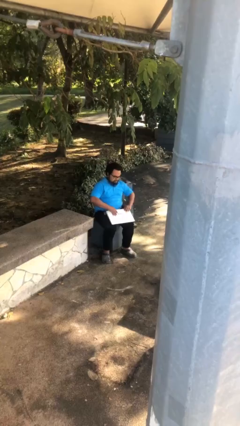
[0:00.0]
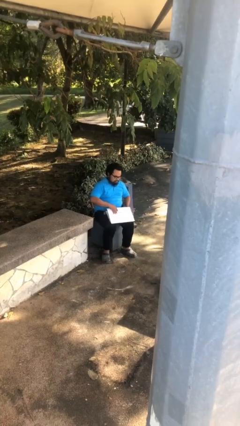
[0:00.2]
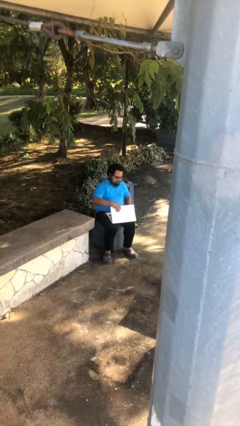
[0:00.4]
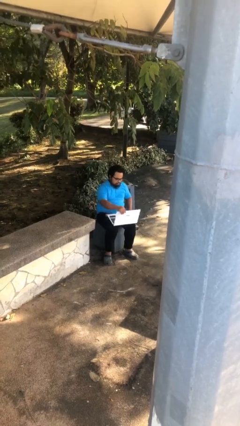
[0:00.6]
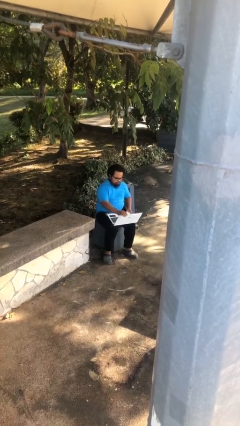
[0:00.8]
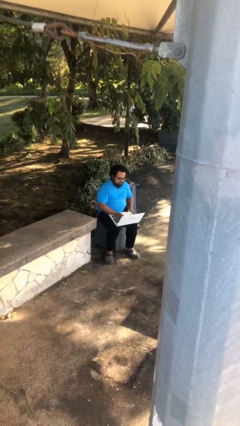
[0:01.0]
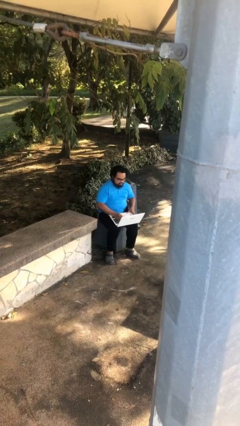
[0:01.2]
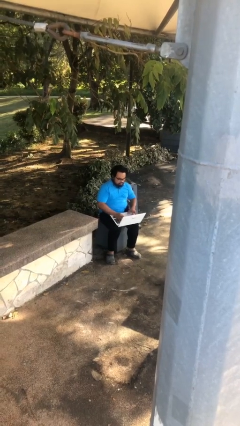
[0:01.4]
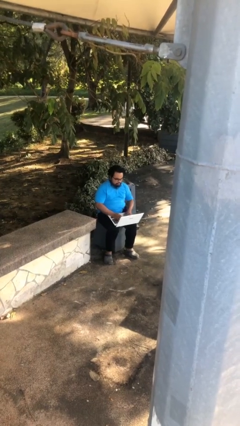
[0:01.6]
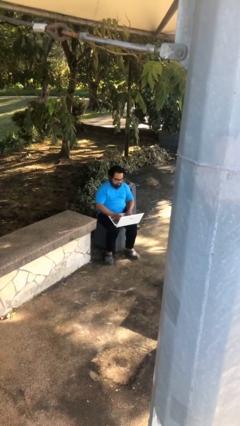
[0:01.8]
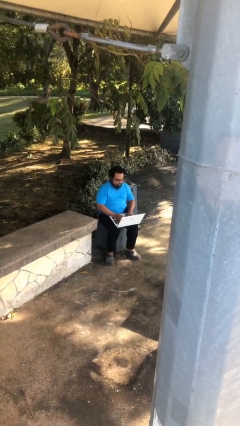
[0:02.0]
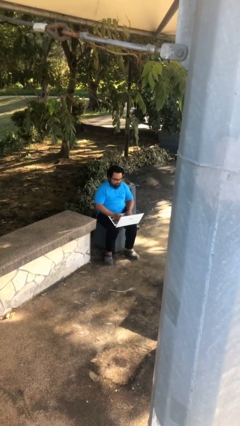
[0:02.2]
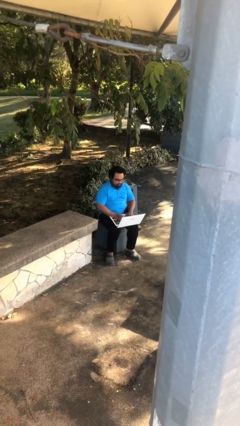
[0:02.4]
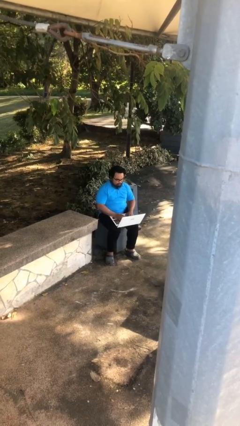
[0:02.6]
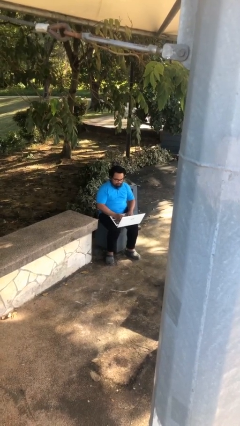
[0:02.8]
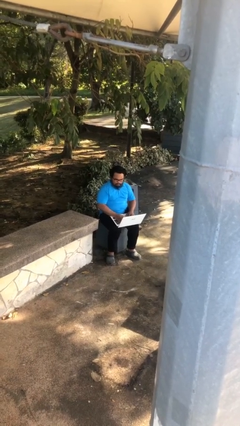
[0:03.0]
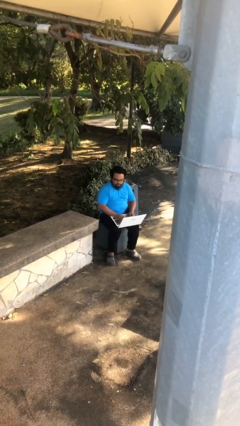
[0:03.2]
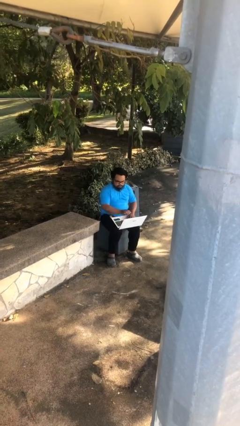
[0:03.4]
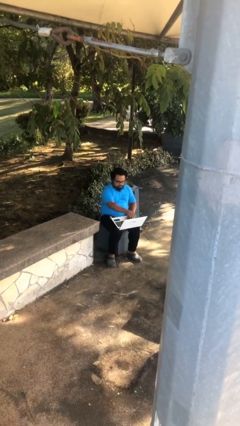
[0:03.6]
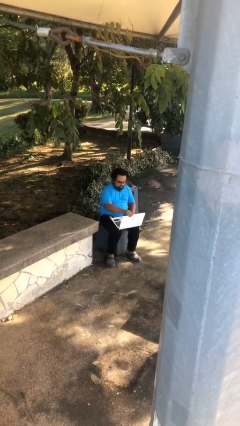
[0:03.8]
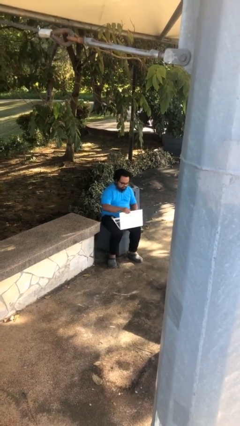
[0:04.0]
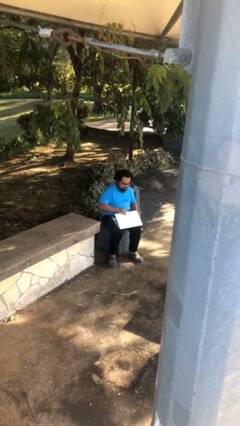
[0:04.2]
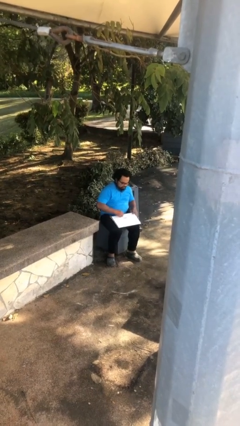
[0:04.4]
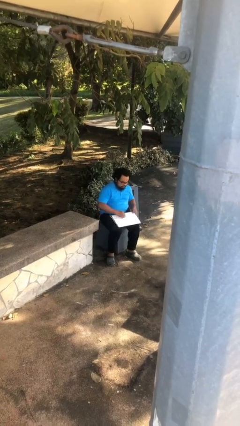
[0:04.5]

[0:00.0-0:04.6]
person interacts with laptop

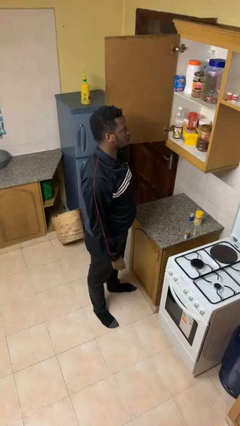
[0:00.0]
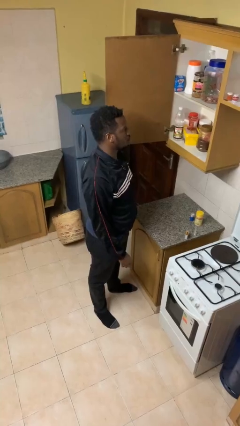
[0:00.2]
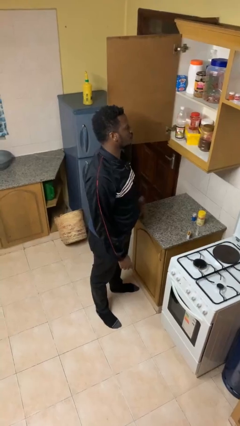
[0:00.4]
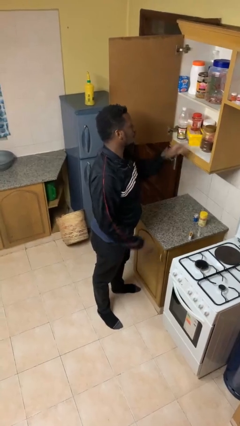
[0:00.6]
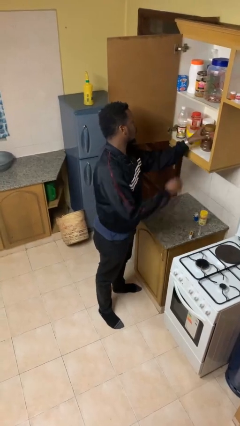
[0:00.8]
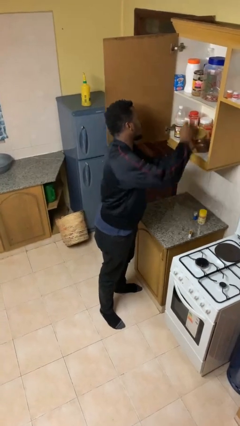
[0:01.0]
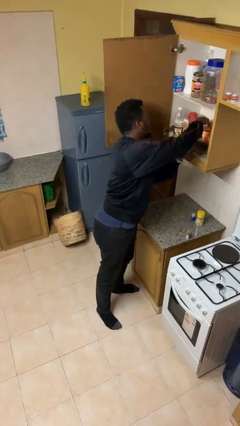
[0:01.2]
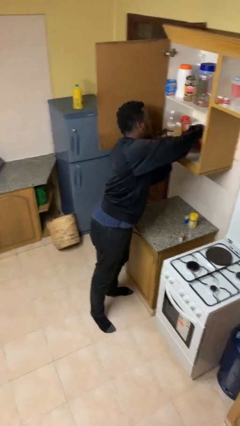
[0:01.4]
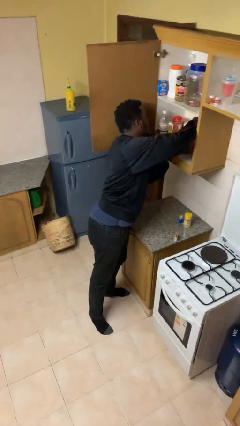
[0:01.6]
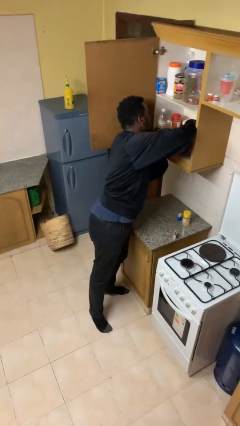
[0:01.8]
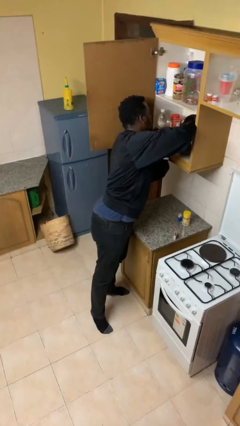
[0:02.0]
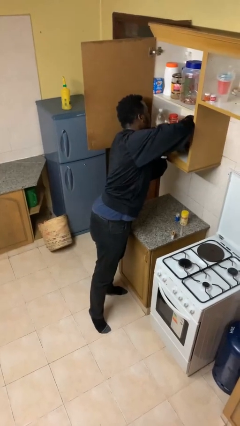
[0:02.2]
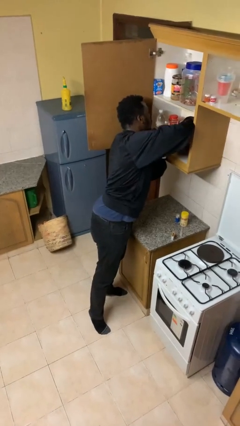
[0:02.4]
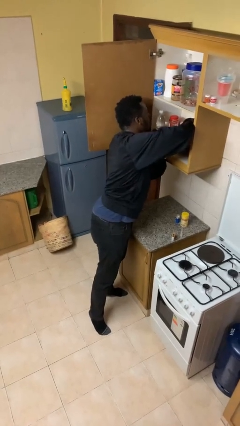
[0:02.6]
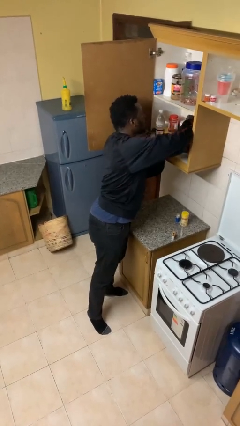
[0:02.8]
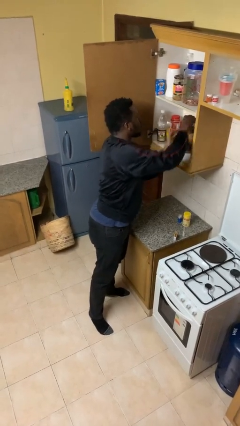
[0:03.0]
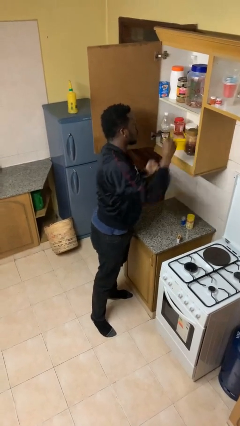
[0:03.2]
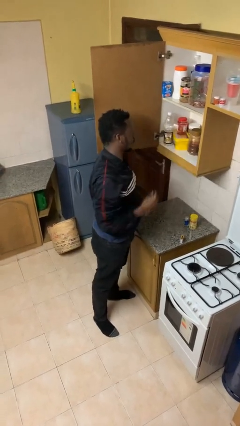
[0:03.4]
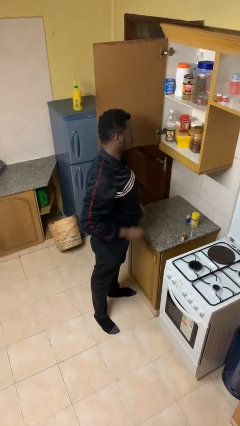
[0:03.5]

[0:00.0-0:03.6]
person searches in cabinet

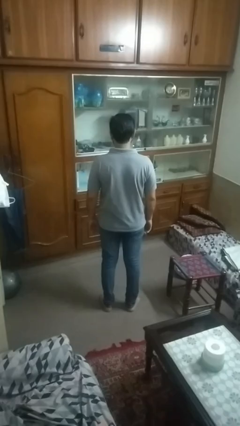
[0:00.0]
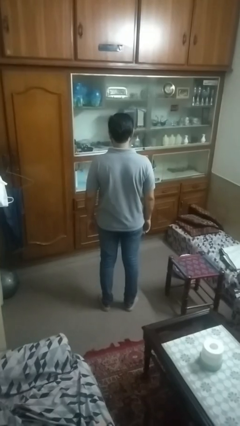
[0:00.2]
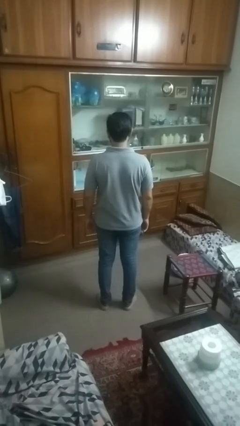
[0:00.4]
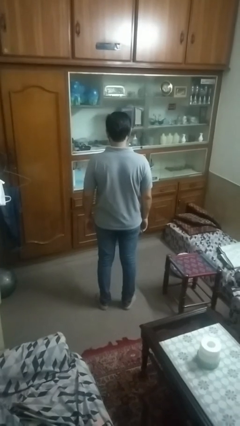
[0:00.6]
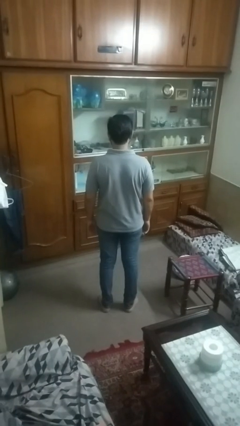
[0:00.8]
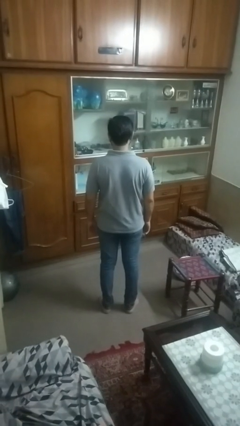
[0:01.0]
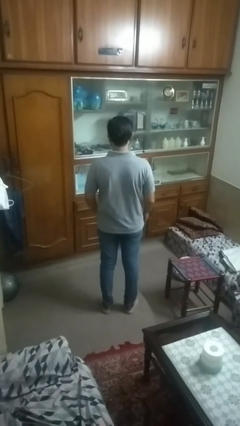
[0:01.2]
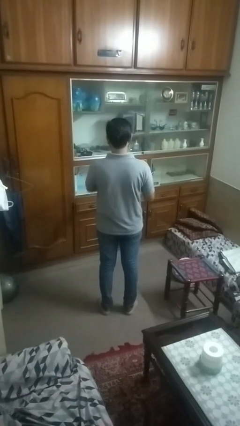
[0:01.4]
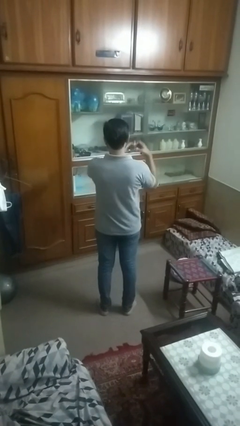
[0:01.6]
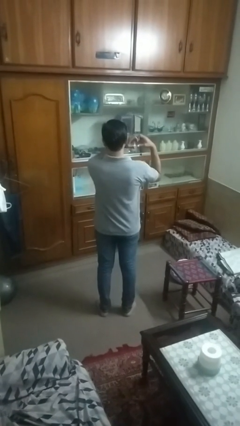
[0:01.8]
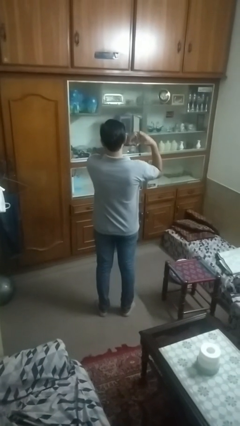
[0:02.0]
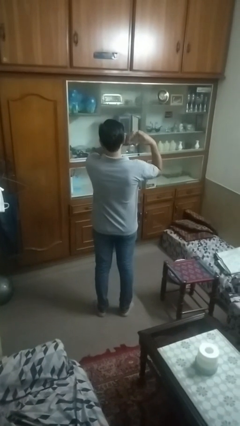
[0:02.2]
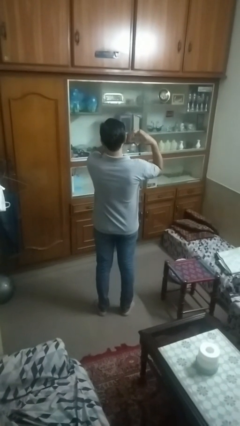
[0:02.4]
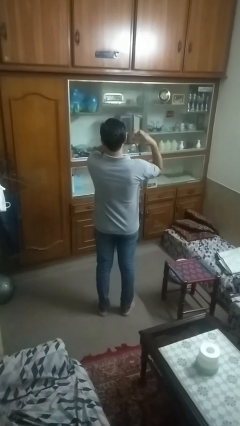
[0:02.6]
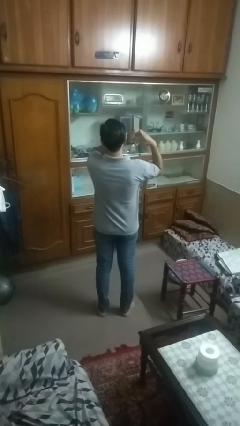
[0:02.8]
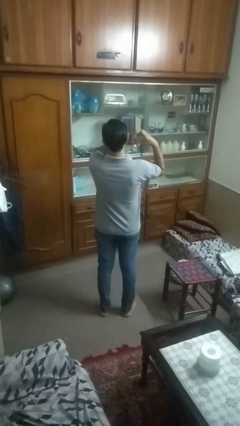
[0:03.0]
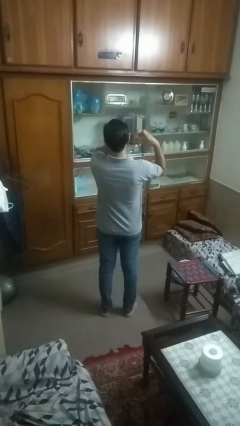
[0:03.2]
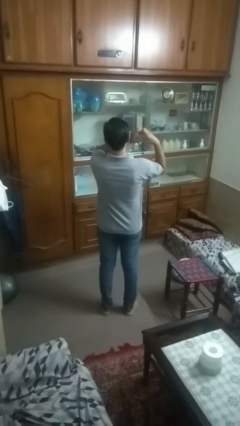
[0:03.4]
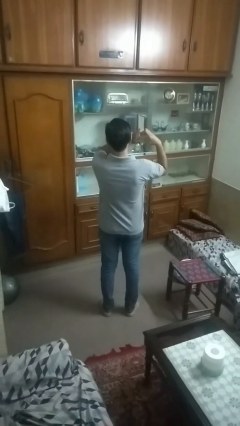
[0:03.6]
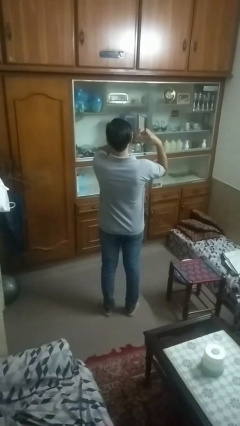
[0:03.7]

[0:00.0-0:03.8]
person gestures heart

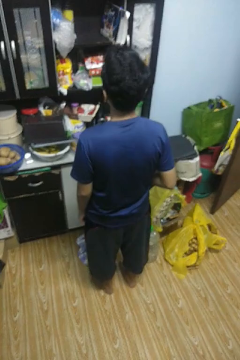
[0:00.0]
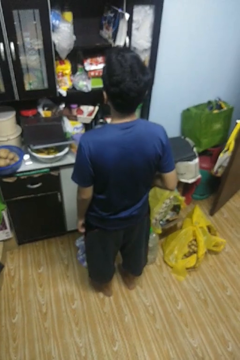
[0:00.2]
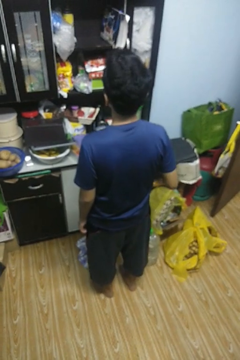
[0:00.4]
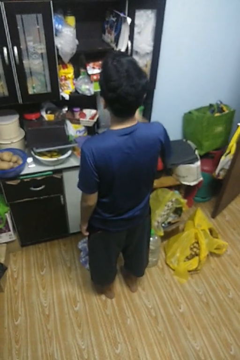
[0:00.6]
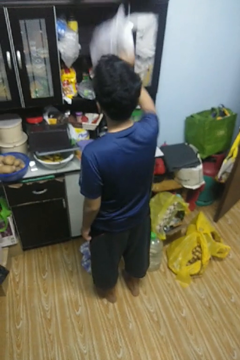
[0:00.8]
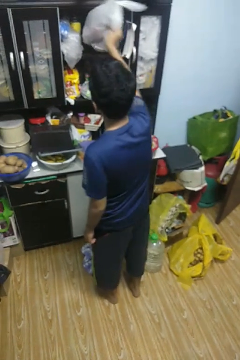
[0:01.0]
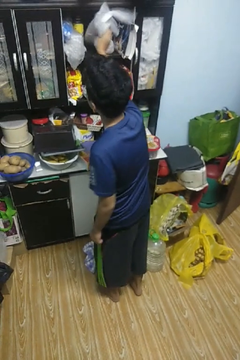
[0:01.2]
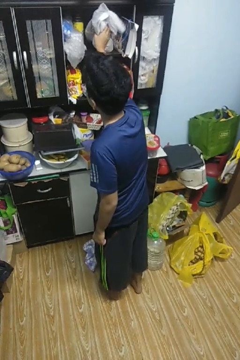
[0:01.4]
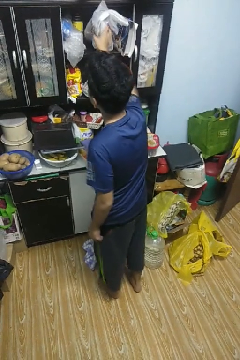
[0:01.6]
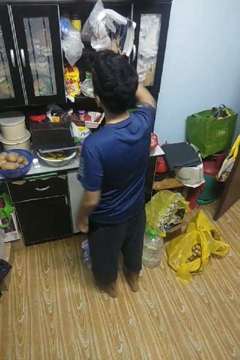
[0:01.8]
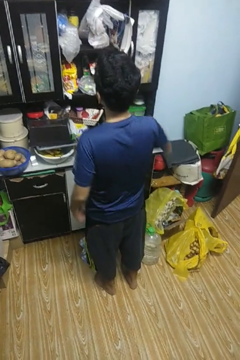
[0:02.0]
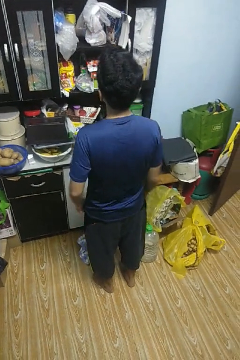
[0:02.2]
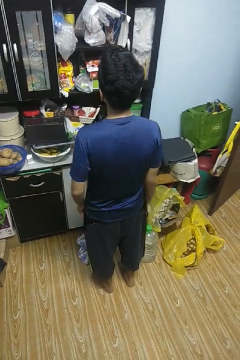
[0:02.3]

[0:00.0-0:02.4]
person loads groceries into cabinet

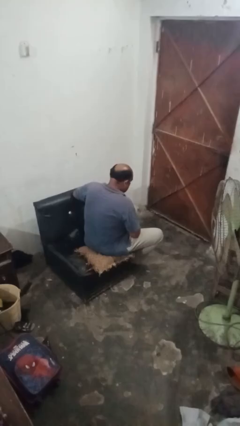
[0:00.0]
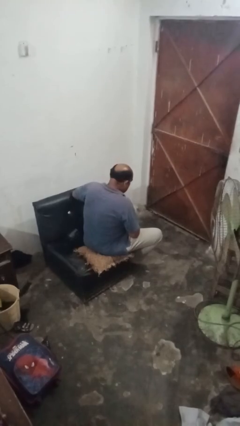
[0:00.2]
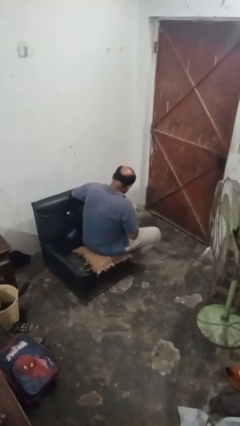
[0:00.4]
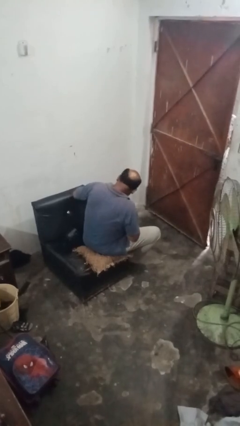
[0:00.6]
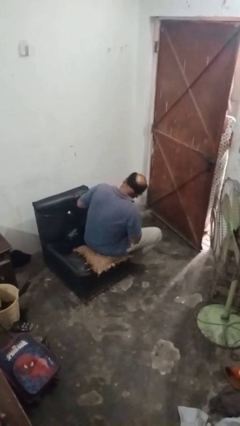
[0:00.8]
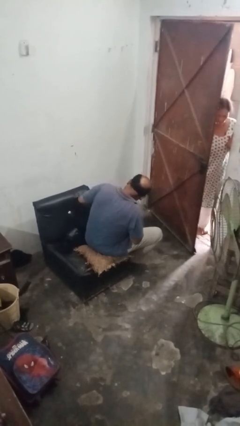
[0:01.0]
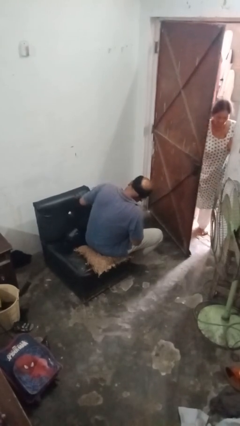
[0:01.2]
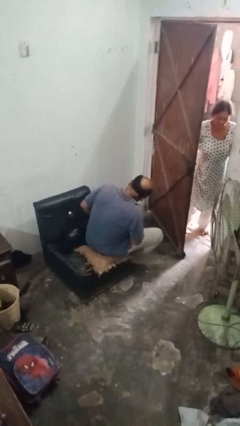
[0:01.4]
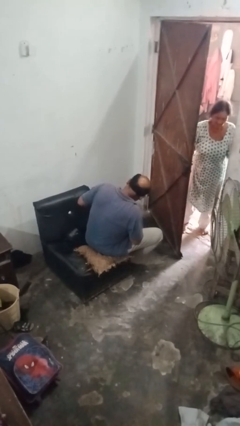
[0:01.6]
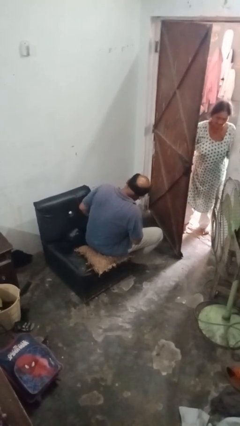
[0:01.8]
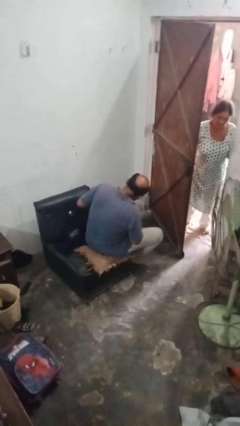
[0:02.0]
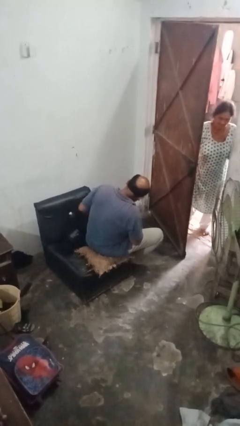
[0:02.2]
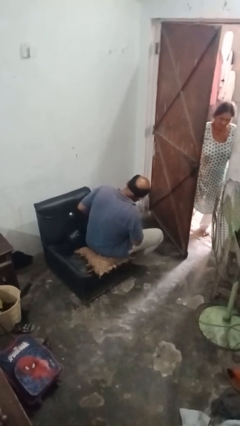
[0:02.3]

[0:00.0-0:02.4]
person slaps hands on thighs

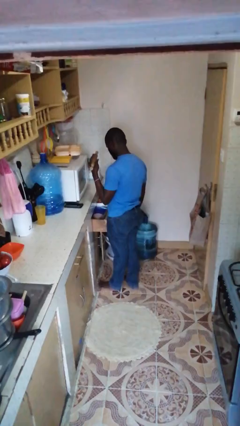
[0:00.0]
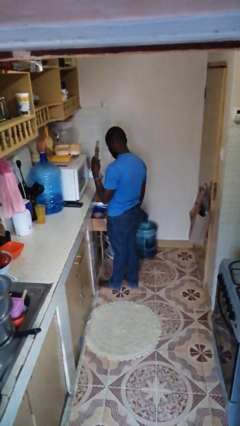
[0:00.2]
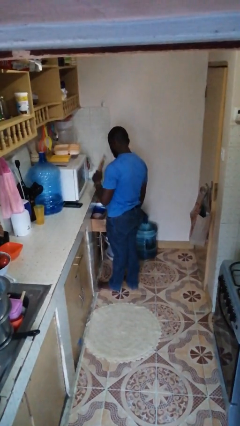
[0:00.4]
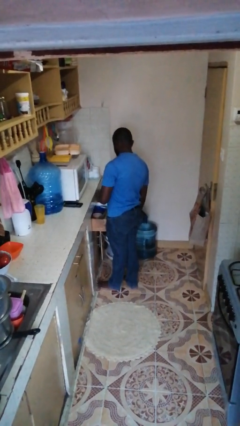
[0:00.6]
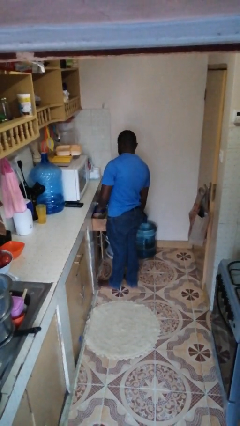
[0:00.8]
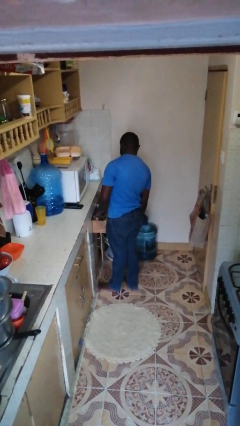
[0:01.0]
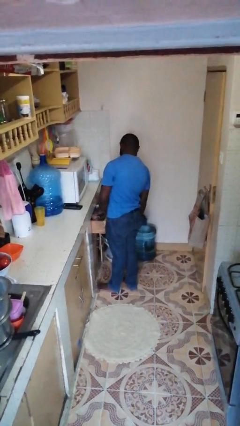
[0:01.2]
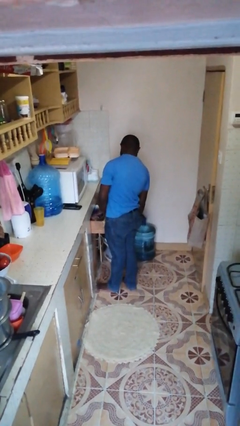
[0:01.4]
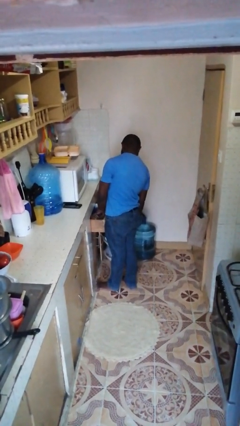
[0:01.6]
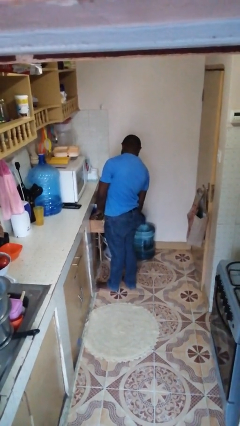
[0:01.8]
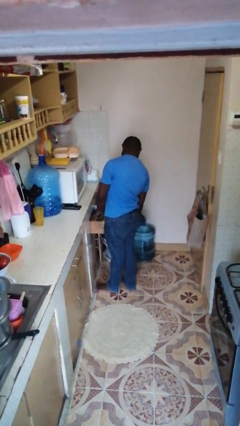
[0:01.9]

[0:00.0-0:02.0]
person puts object into kitchen drawer
